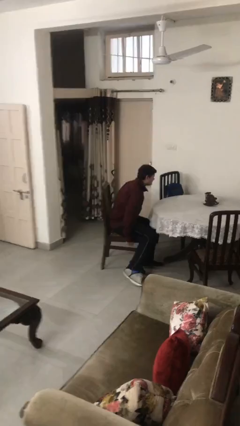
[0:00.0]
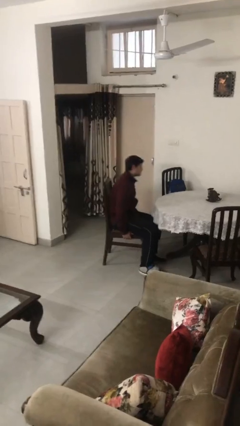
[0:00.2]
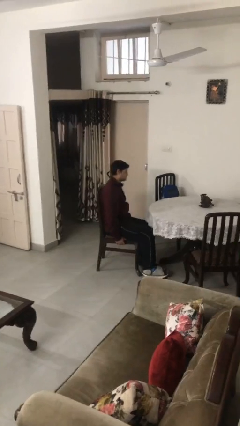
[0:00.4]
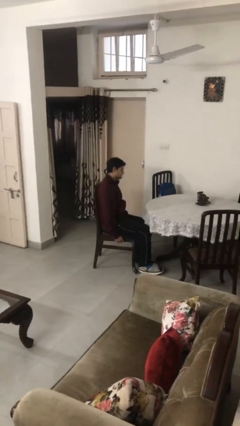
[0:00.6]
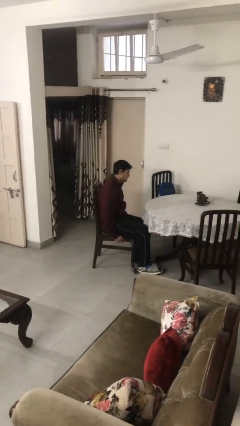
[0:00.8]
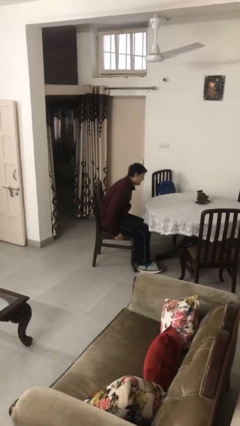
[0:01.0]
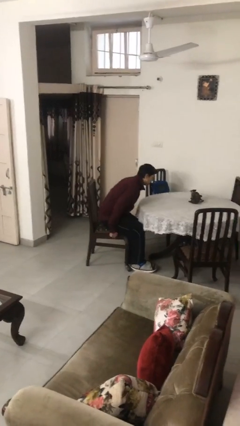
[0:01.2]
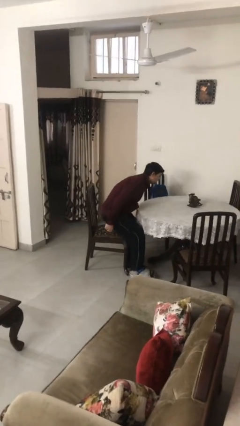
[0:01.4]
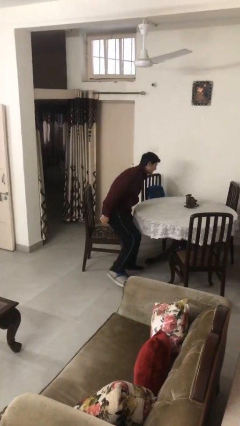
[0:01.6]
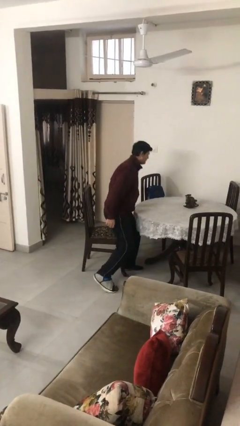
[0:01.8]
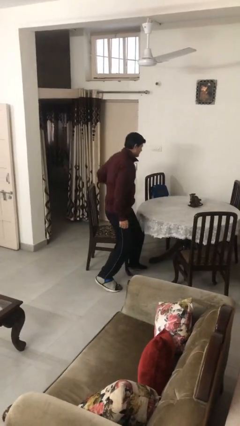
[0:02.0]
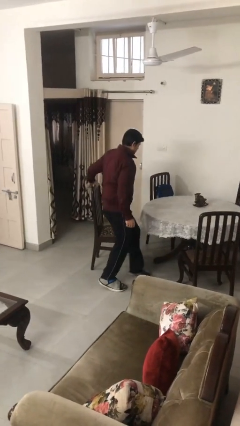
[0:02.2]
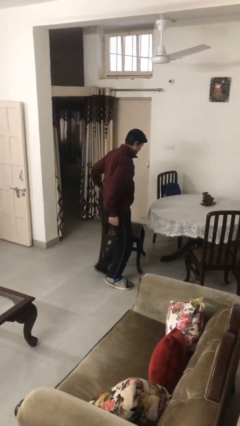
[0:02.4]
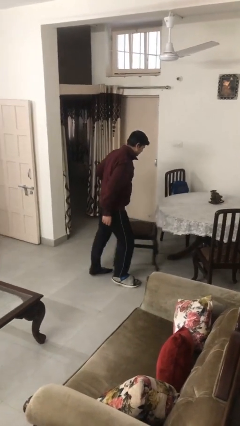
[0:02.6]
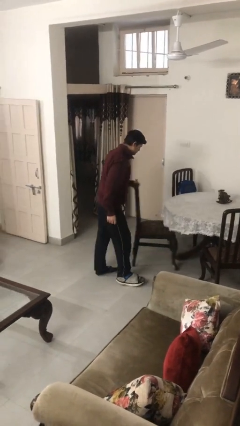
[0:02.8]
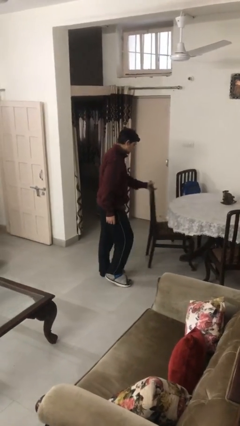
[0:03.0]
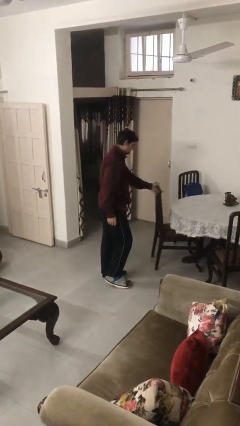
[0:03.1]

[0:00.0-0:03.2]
person stands up

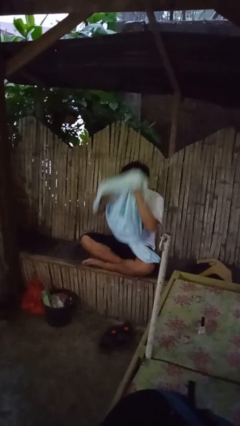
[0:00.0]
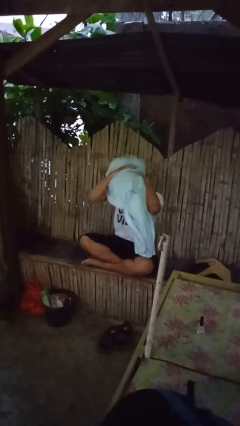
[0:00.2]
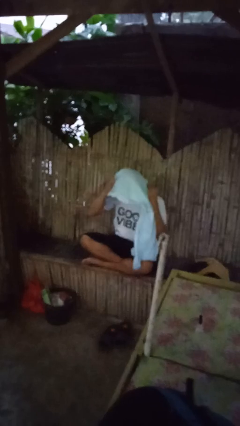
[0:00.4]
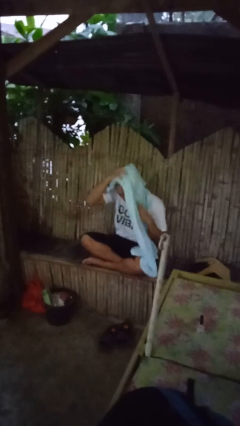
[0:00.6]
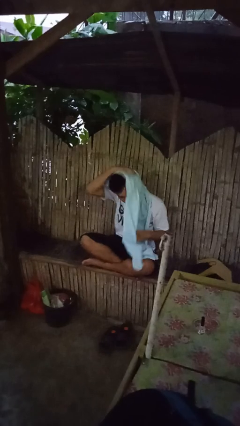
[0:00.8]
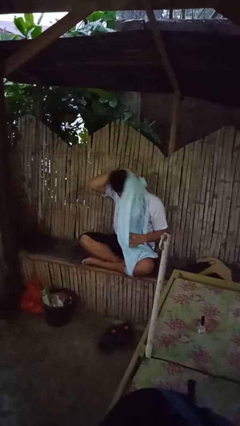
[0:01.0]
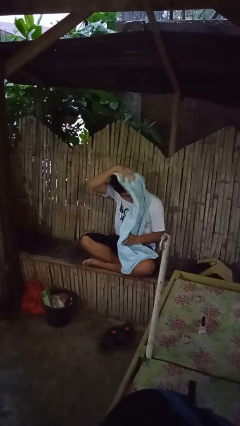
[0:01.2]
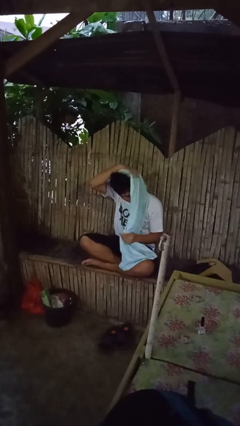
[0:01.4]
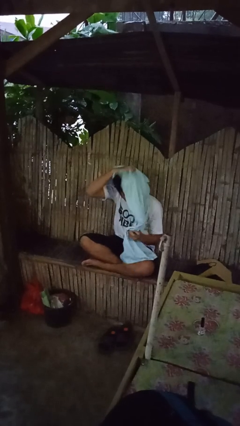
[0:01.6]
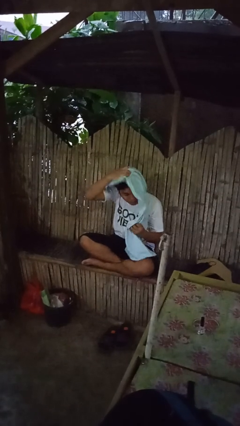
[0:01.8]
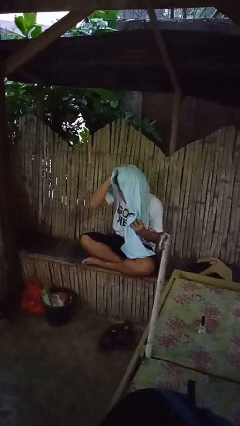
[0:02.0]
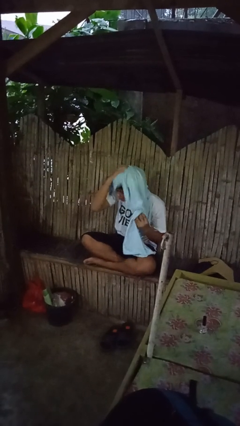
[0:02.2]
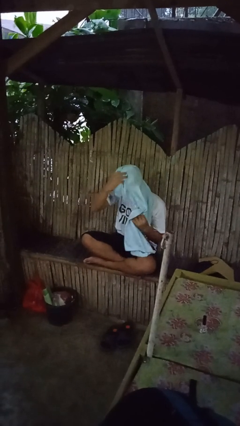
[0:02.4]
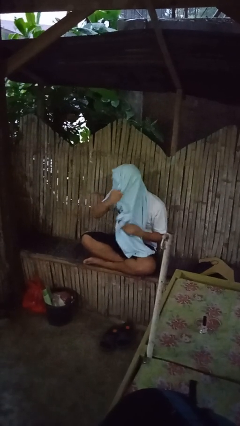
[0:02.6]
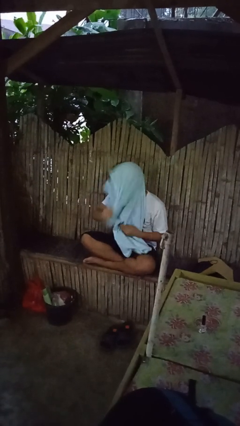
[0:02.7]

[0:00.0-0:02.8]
person dries hair with towel

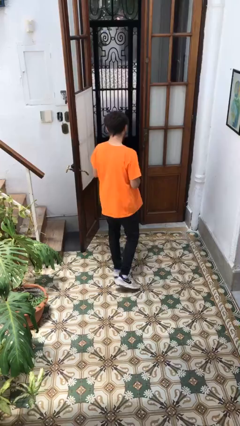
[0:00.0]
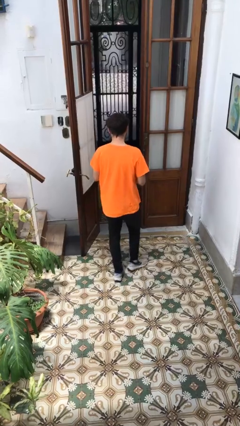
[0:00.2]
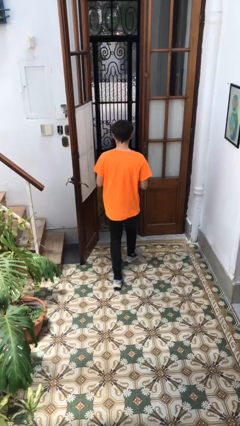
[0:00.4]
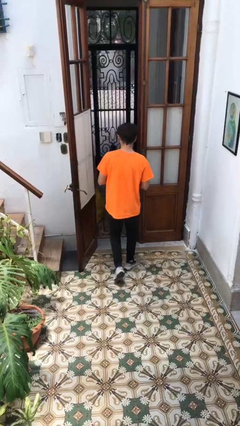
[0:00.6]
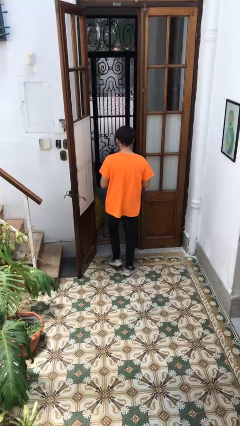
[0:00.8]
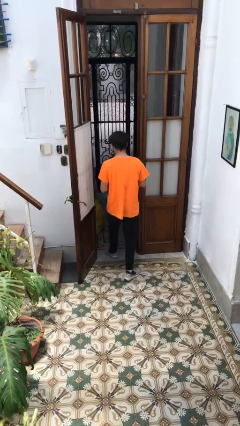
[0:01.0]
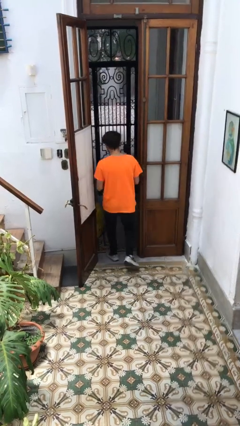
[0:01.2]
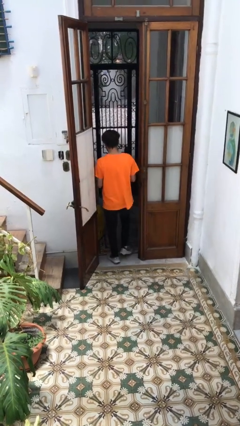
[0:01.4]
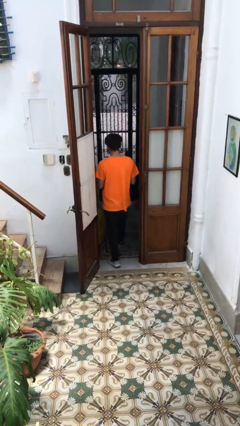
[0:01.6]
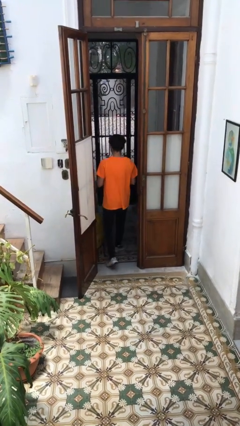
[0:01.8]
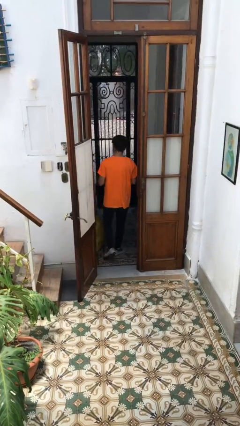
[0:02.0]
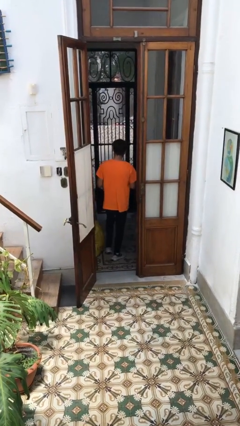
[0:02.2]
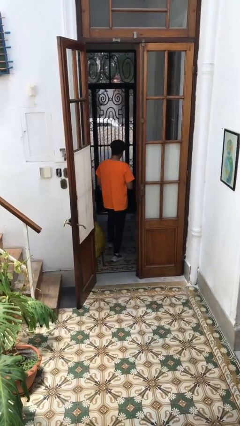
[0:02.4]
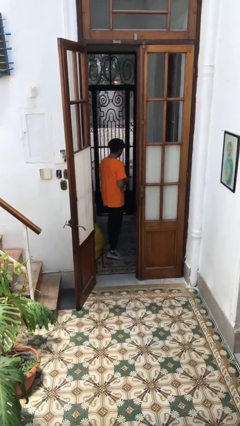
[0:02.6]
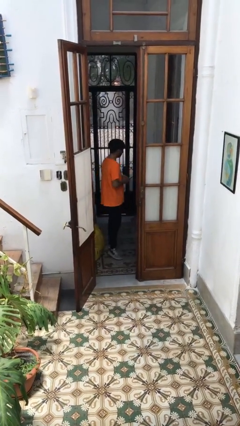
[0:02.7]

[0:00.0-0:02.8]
person exits scene through structure

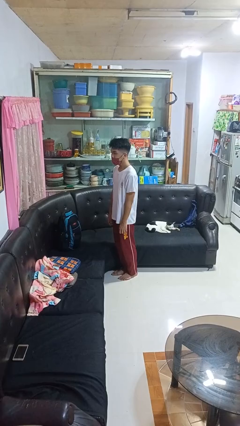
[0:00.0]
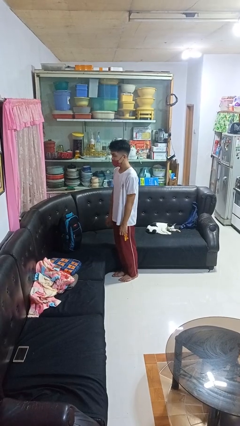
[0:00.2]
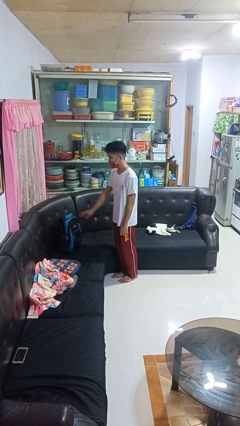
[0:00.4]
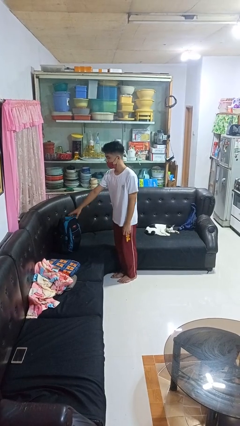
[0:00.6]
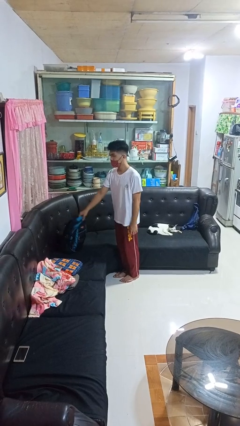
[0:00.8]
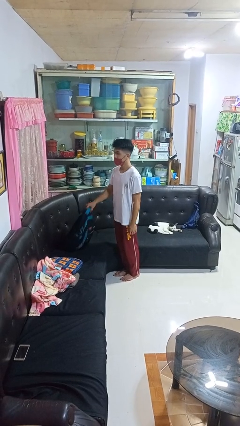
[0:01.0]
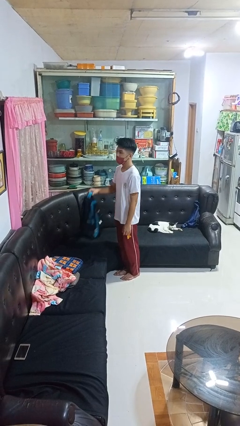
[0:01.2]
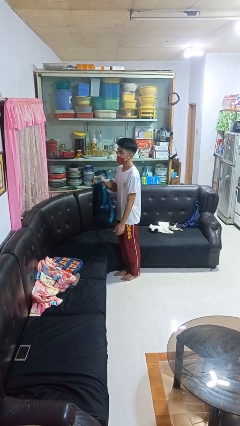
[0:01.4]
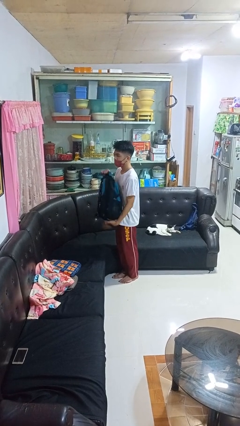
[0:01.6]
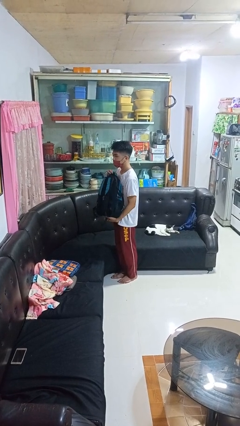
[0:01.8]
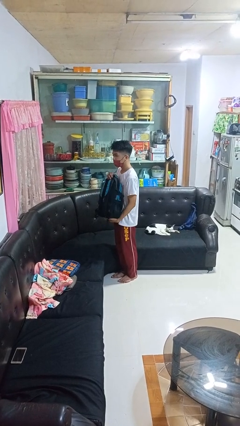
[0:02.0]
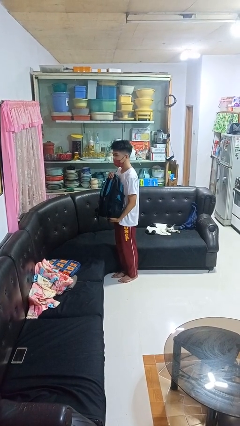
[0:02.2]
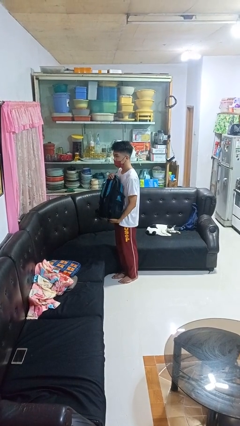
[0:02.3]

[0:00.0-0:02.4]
person picks up object from couch

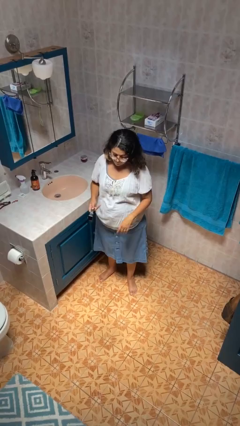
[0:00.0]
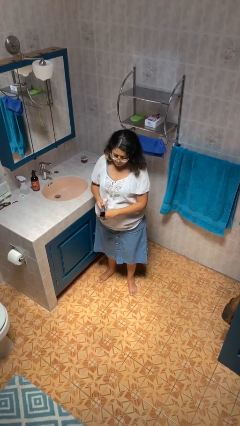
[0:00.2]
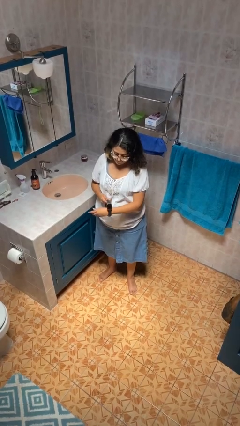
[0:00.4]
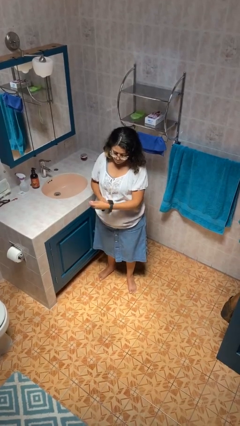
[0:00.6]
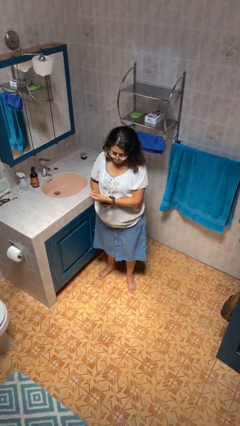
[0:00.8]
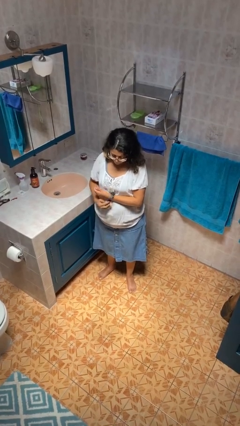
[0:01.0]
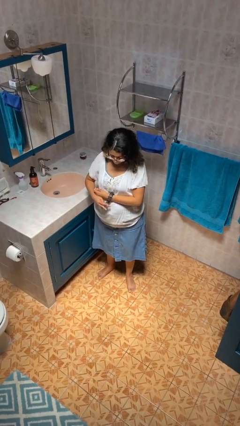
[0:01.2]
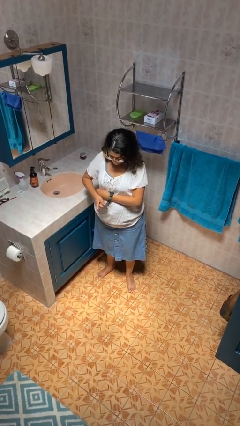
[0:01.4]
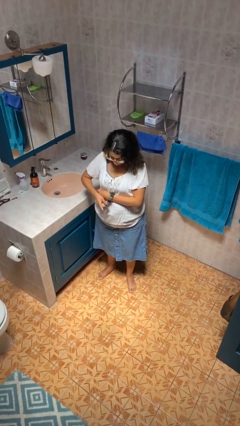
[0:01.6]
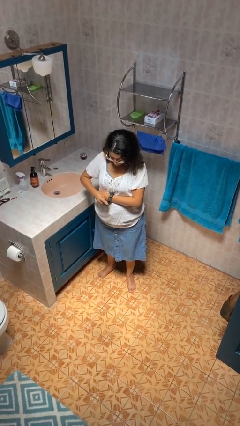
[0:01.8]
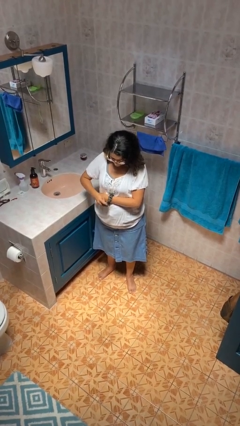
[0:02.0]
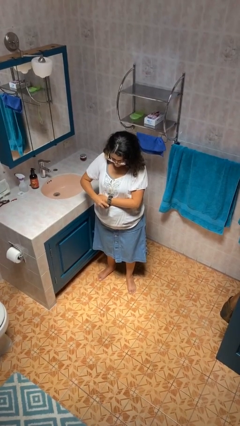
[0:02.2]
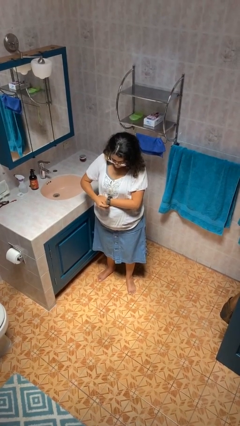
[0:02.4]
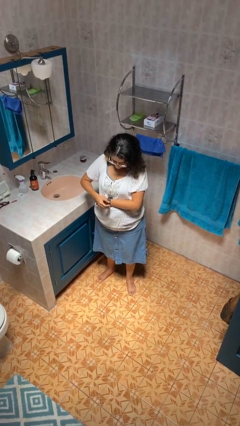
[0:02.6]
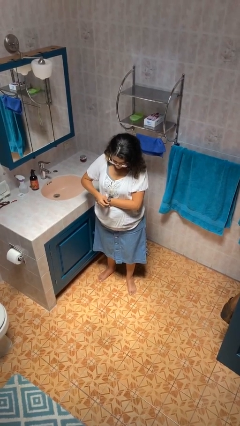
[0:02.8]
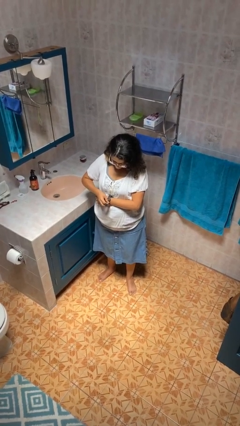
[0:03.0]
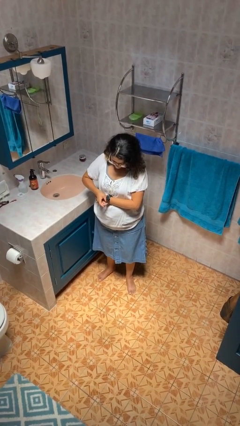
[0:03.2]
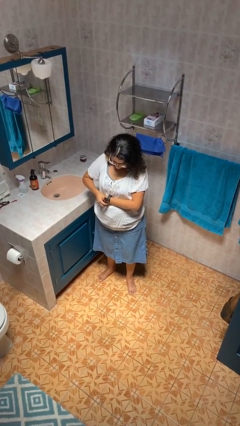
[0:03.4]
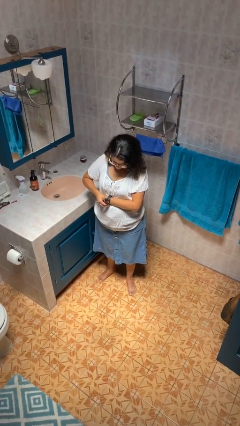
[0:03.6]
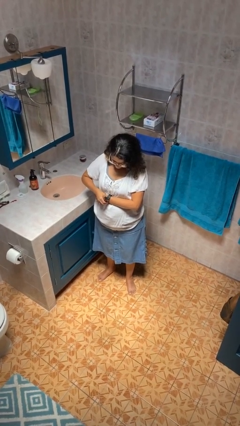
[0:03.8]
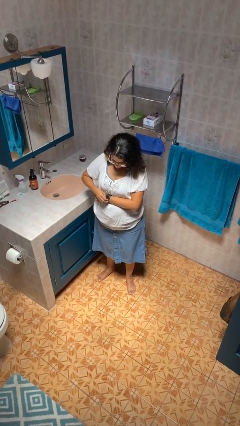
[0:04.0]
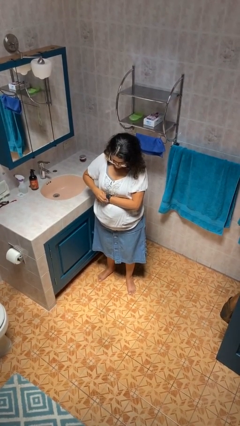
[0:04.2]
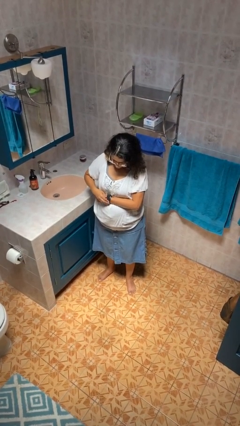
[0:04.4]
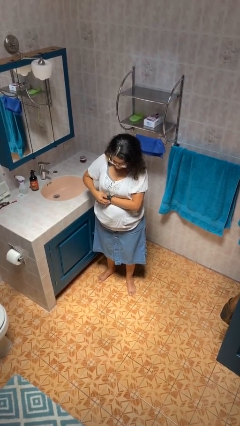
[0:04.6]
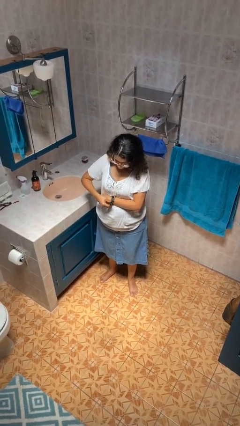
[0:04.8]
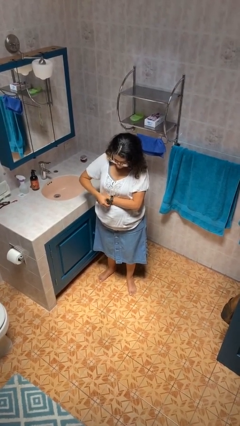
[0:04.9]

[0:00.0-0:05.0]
person puts on wristwatch

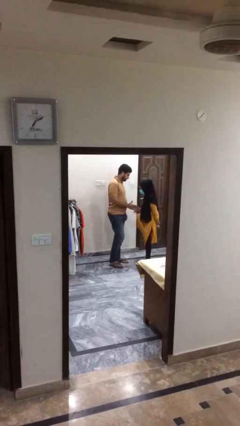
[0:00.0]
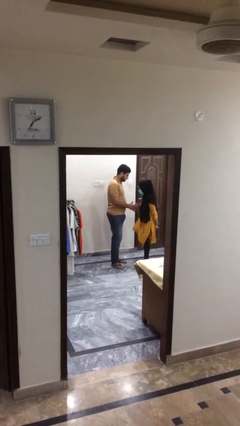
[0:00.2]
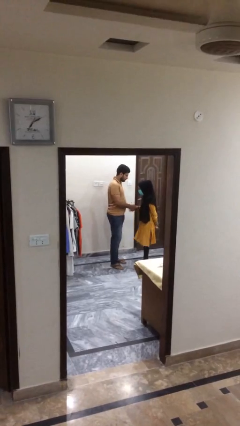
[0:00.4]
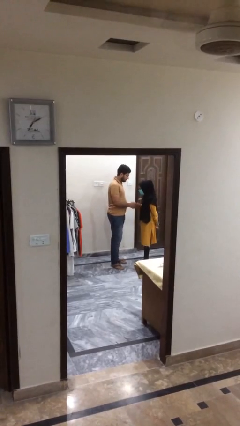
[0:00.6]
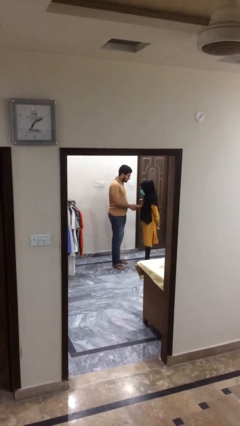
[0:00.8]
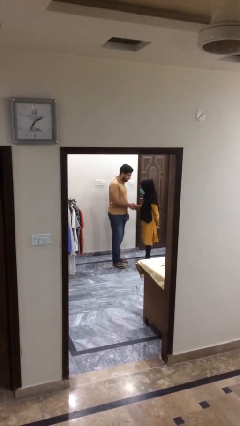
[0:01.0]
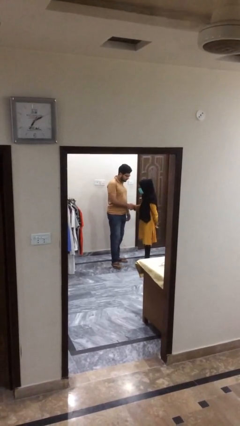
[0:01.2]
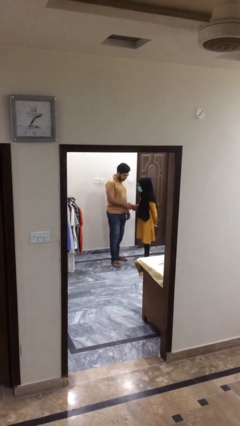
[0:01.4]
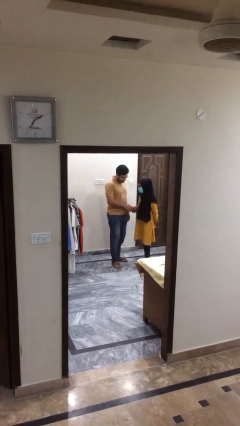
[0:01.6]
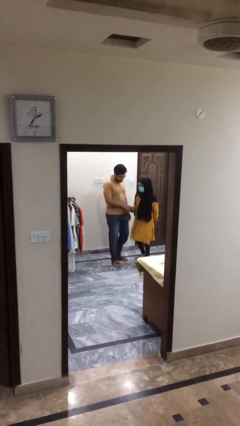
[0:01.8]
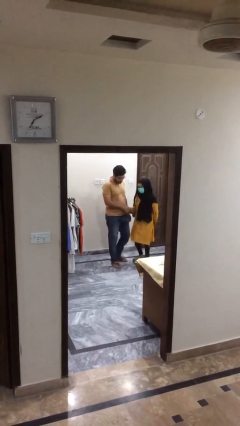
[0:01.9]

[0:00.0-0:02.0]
person shakes hand
